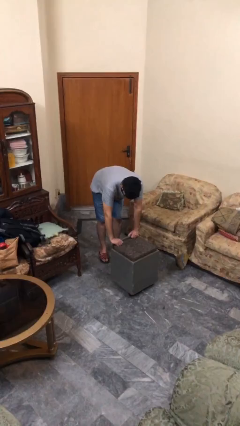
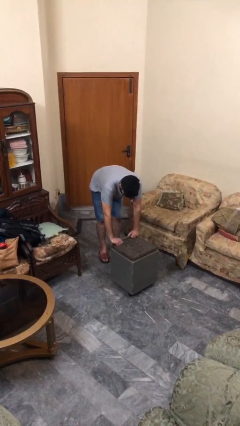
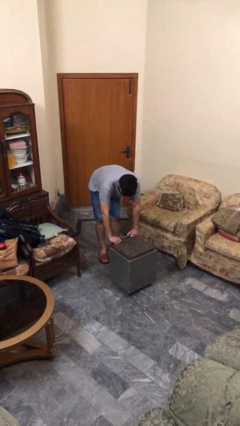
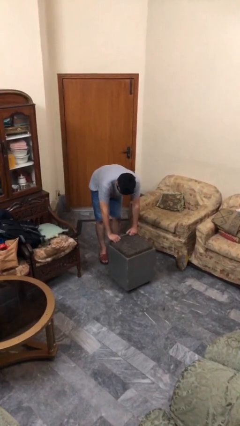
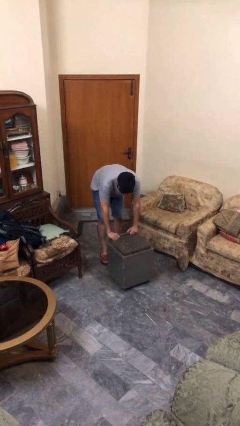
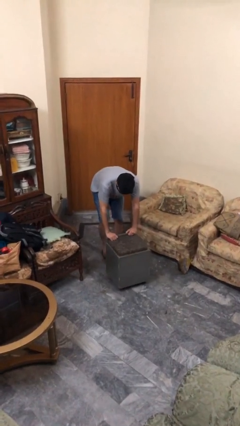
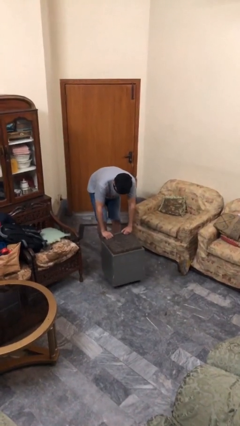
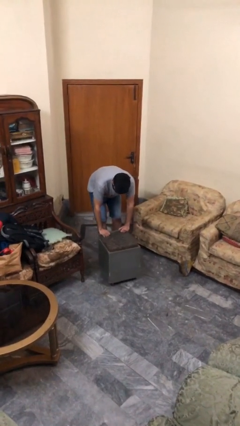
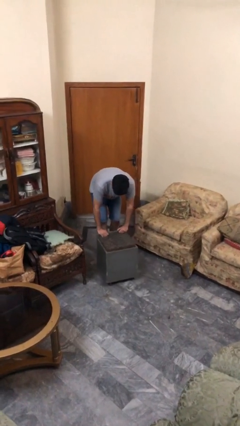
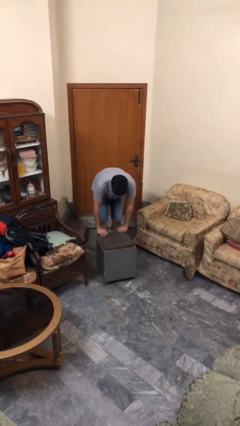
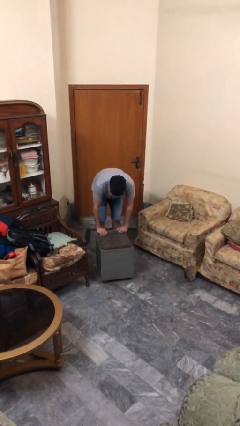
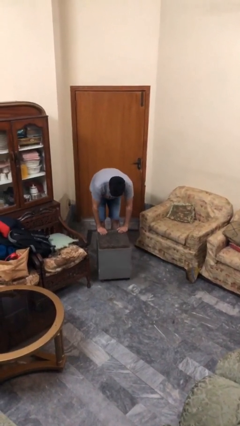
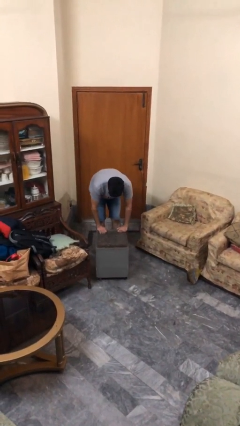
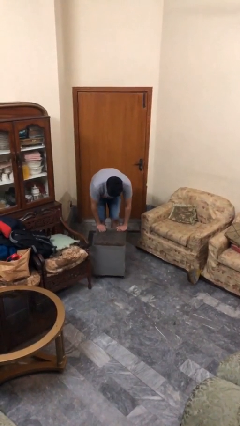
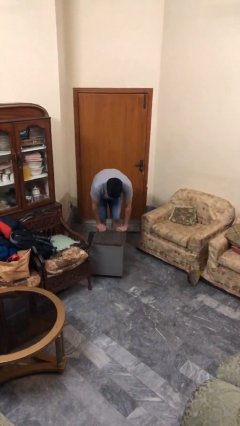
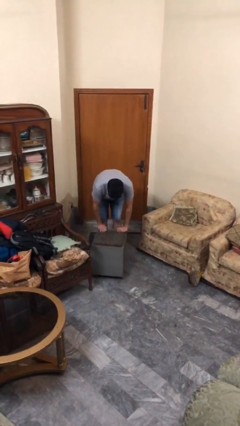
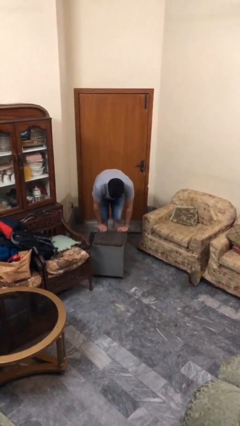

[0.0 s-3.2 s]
person pulls wheeled cart

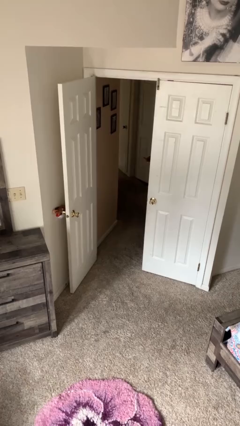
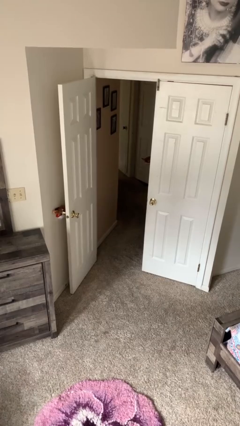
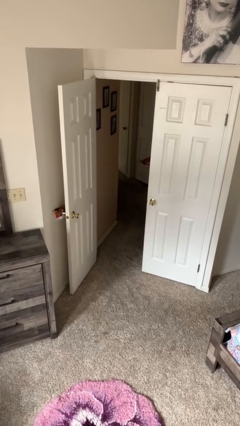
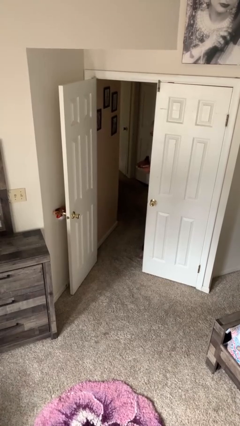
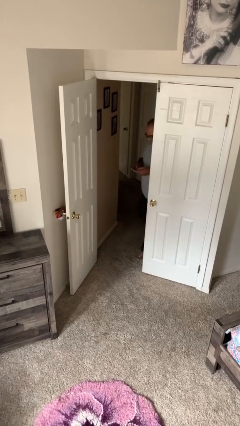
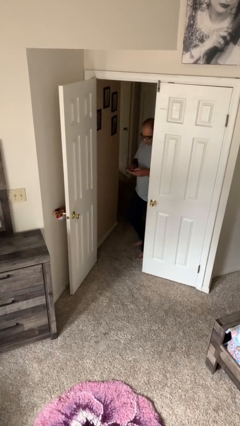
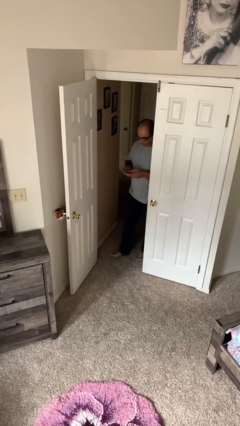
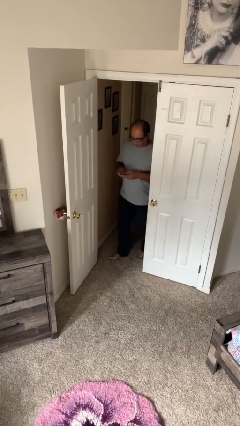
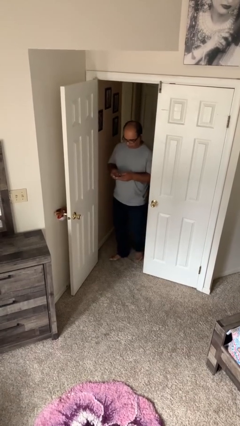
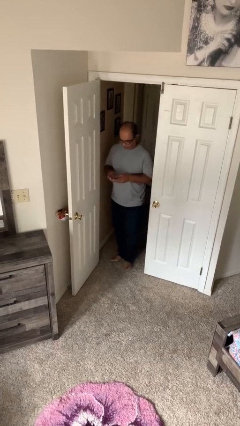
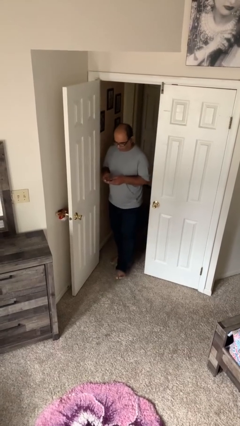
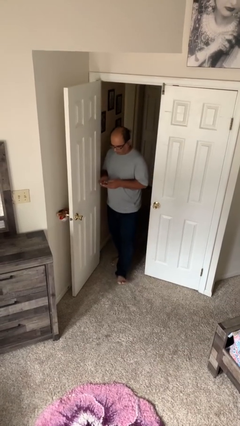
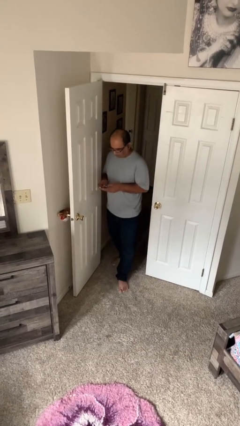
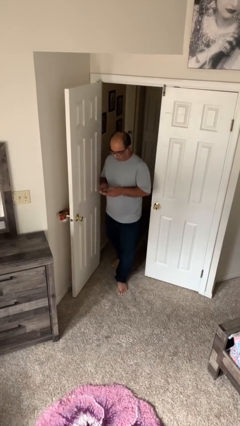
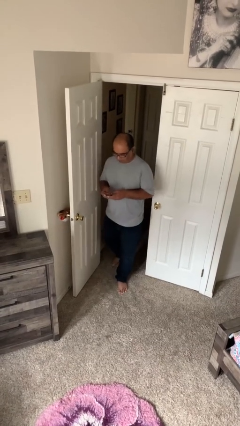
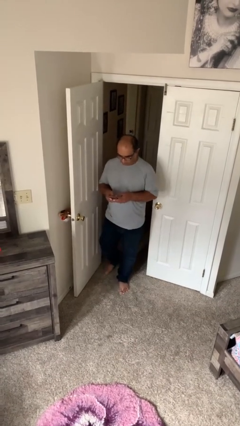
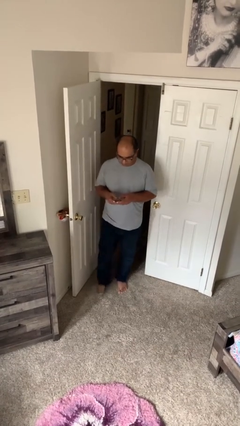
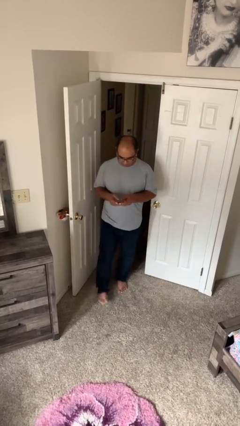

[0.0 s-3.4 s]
person enters scene through structure

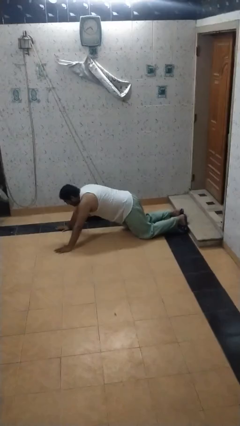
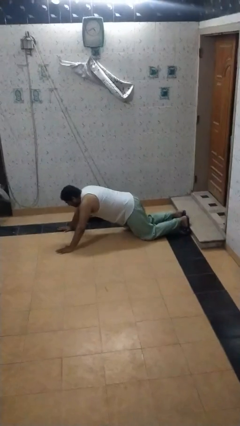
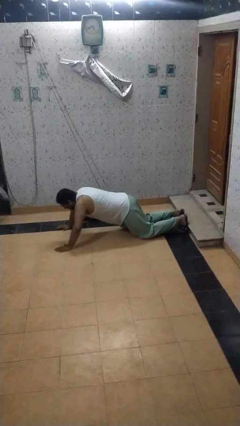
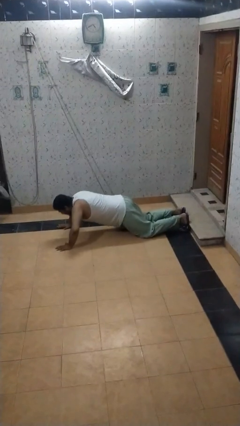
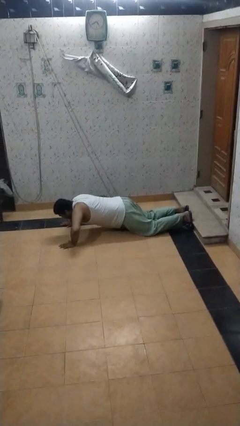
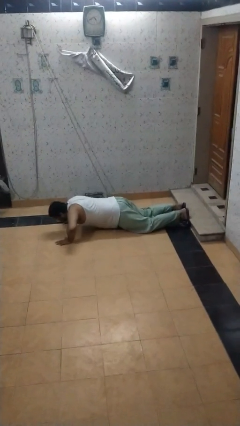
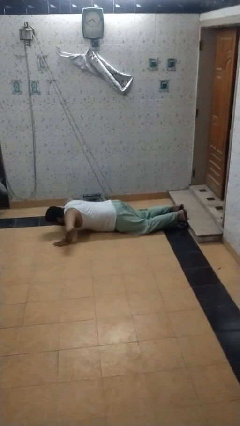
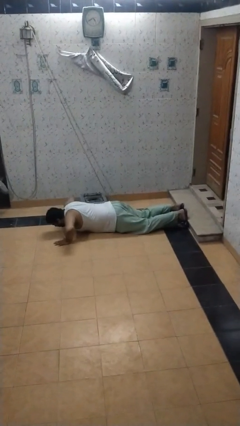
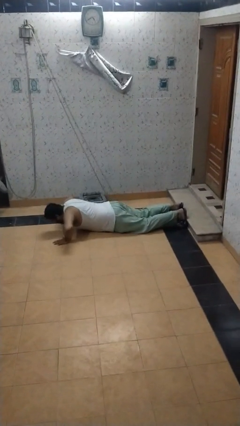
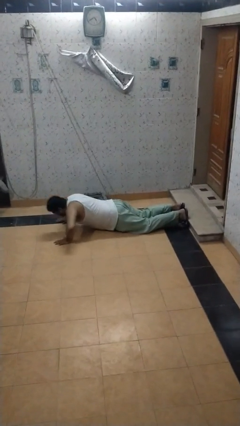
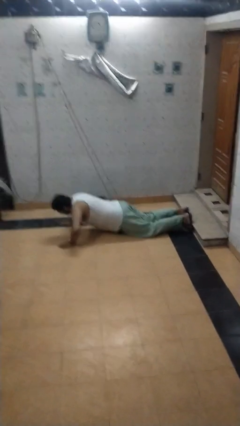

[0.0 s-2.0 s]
person exercises with pushup

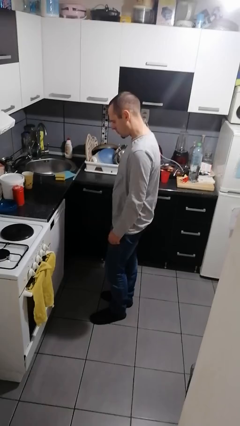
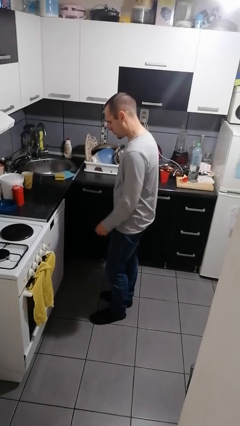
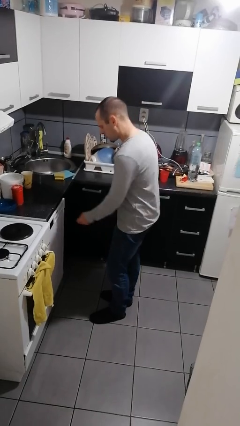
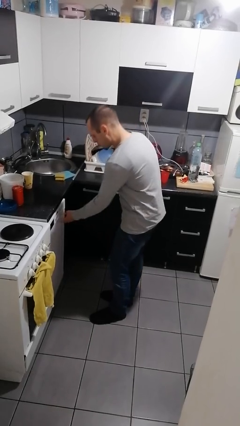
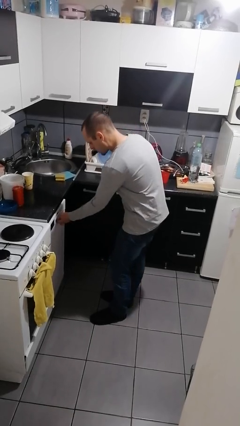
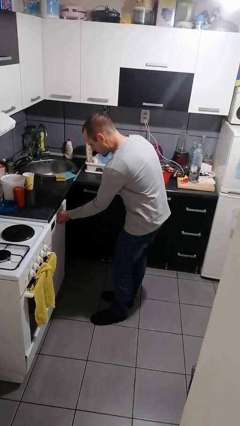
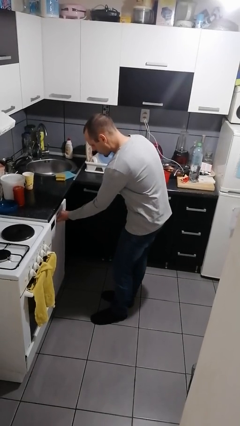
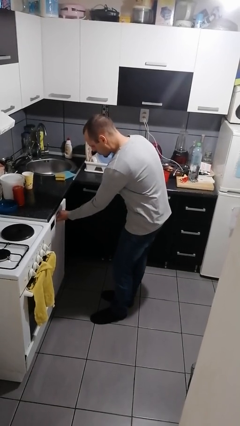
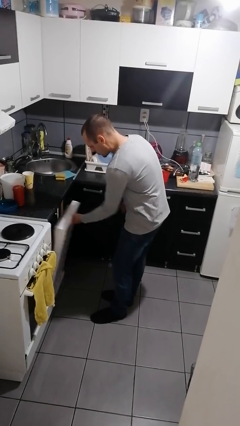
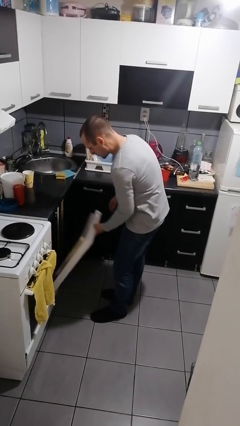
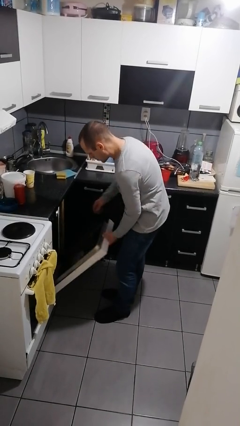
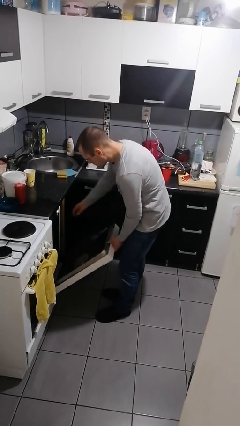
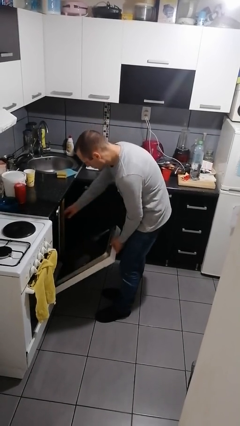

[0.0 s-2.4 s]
person opens dishwasher

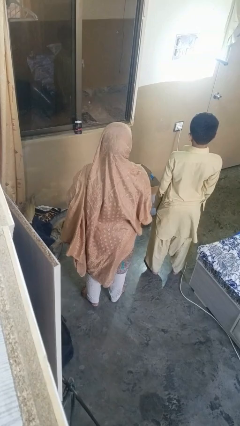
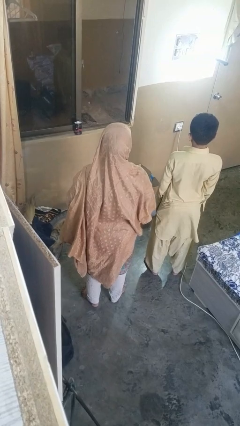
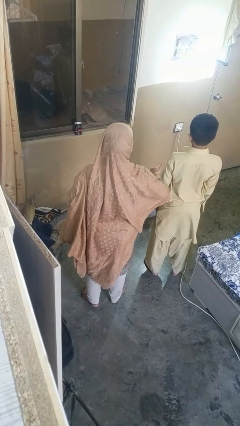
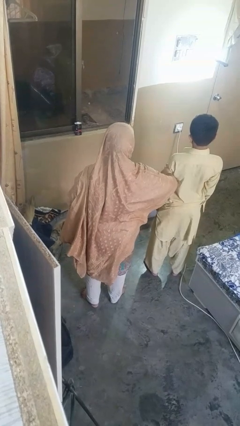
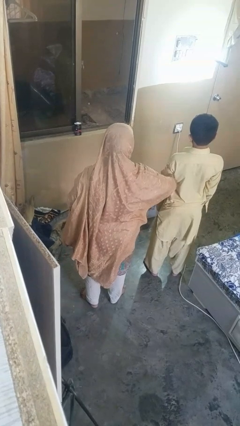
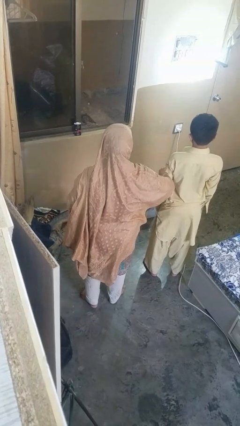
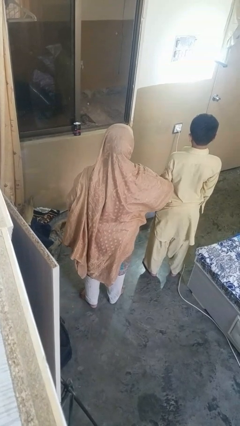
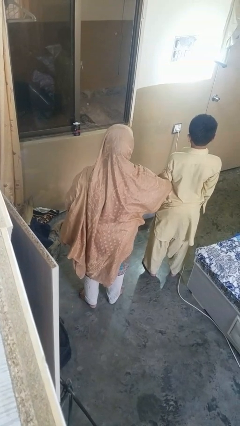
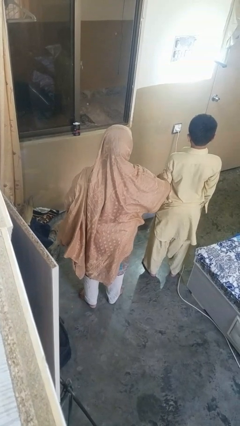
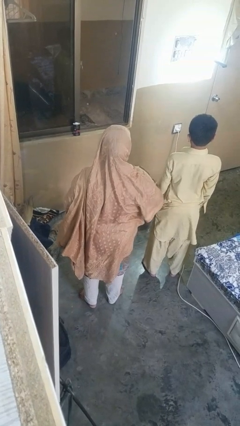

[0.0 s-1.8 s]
person grabs person by bicep

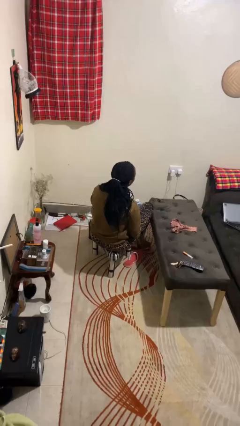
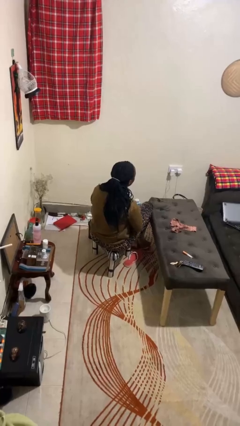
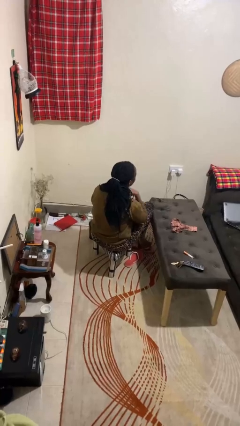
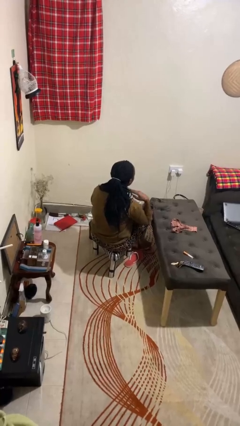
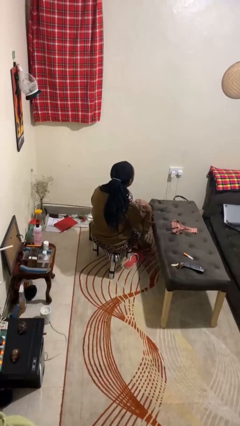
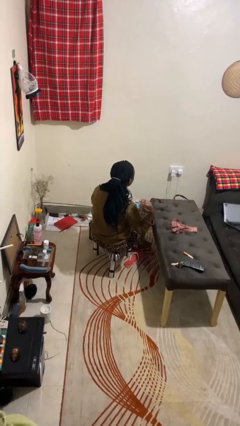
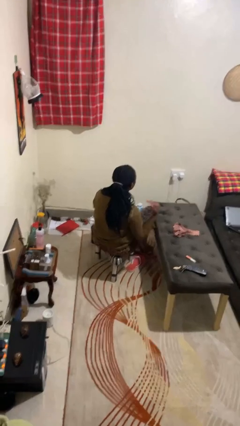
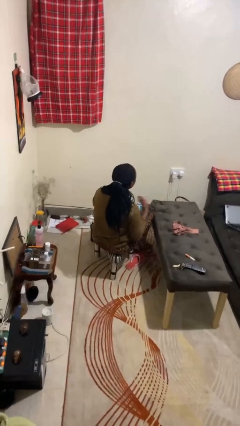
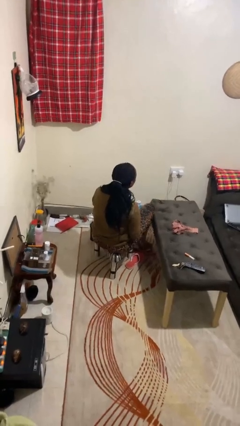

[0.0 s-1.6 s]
person gestures cut

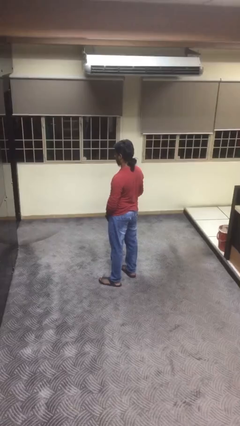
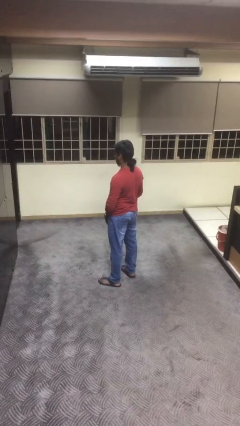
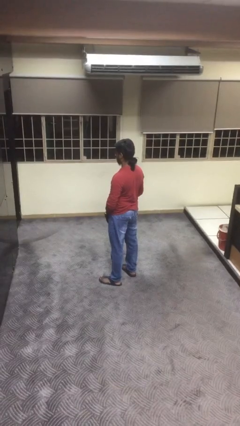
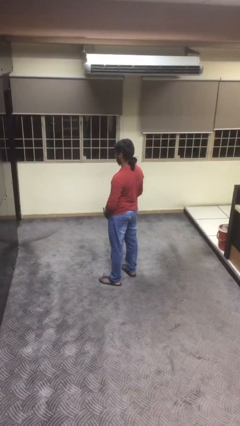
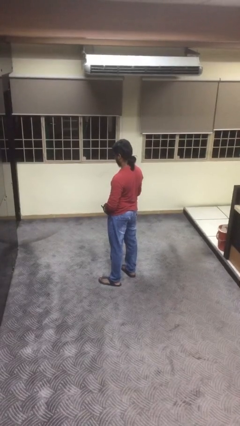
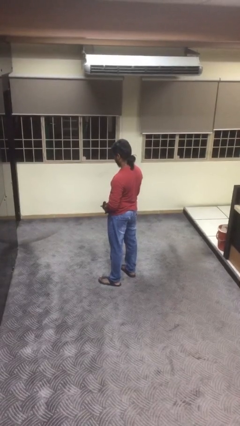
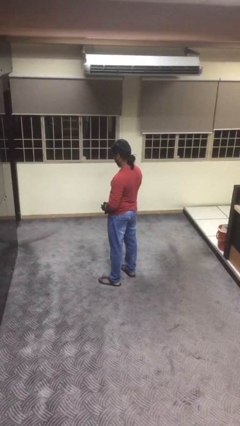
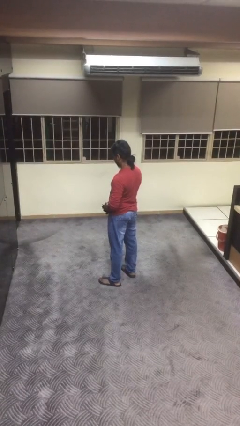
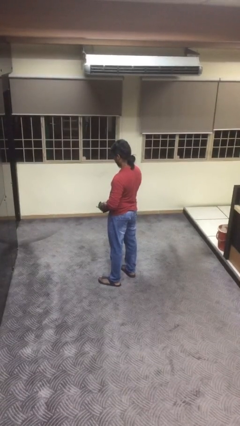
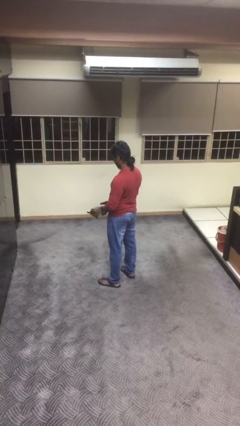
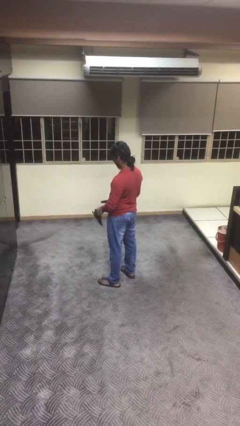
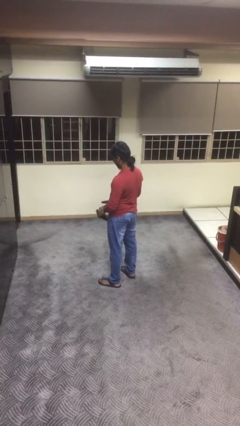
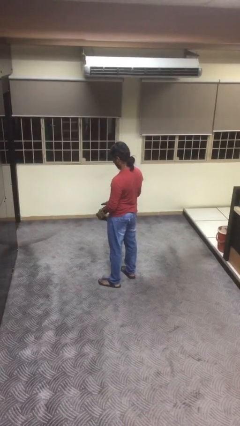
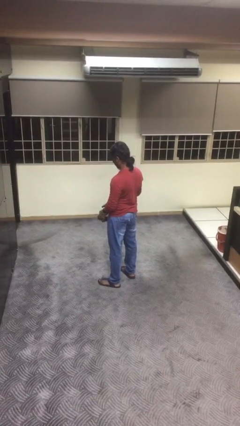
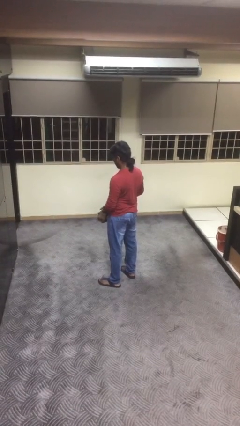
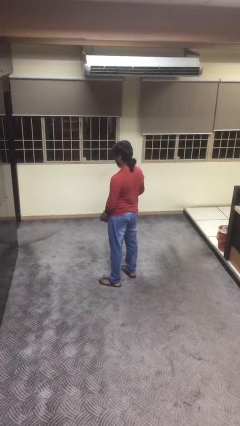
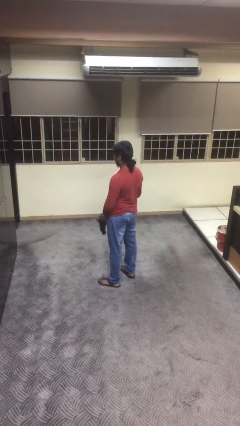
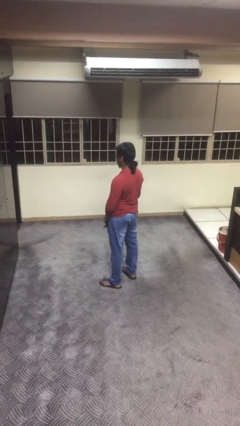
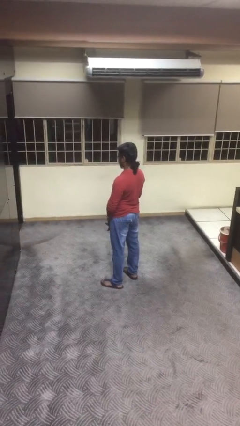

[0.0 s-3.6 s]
person takes off gloves
